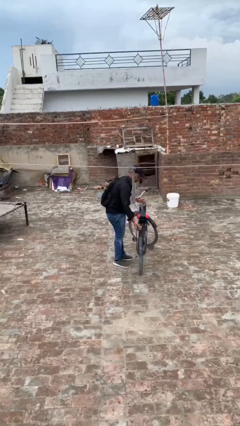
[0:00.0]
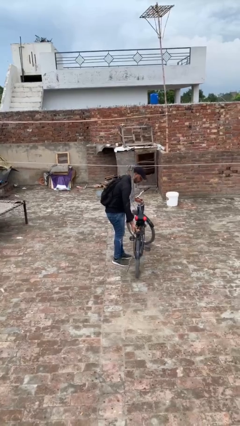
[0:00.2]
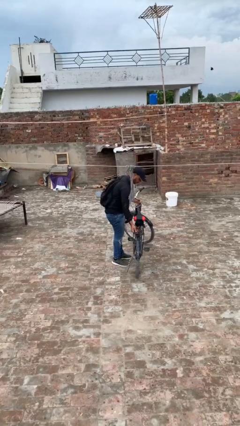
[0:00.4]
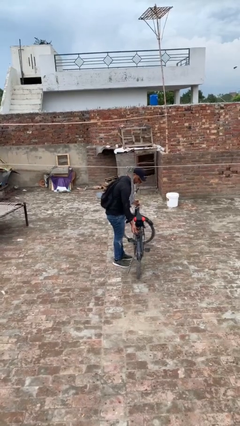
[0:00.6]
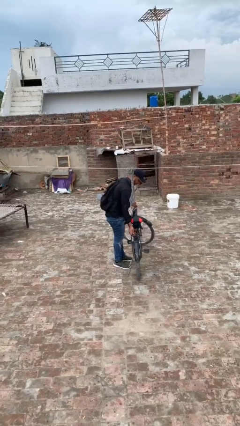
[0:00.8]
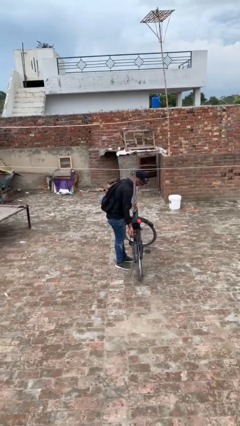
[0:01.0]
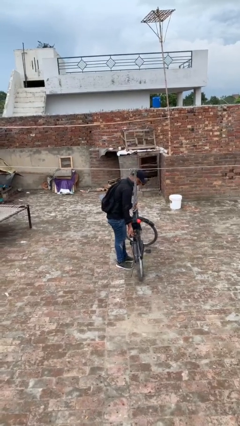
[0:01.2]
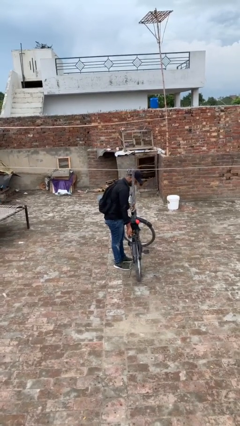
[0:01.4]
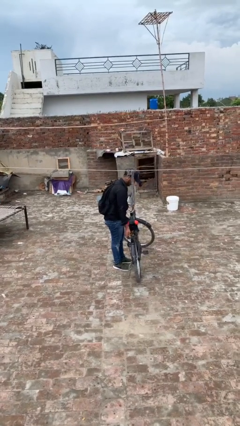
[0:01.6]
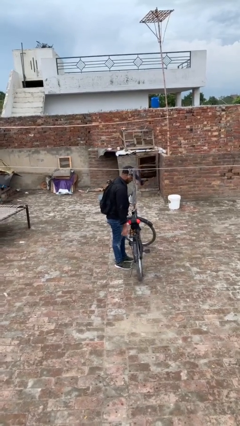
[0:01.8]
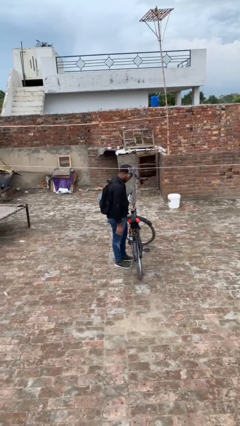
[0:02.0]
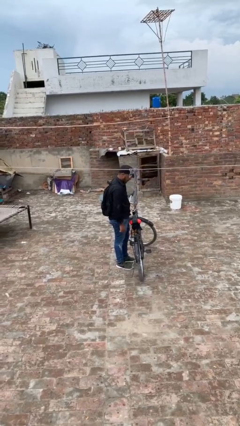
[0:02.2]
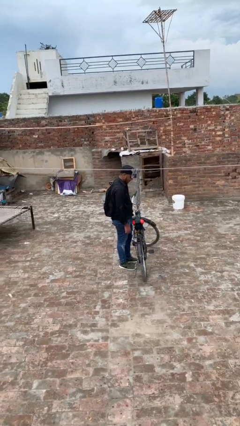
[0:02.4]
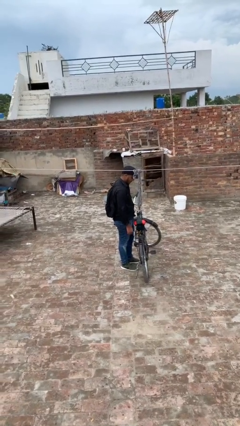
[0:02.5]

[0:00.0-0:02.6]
person puts down object on floor

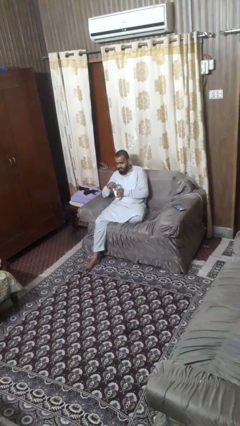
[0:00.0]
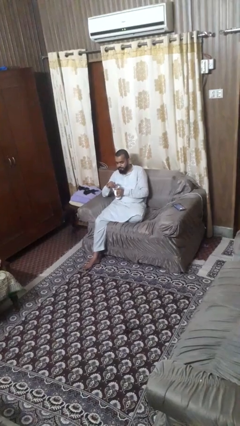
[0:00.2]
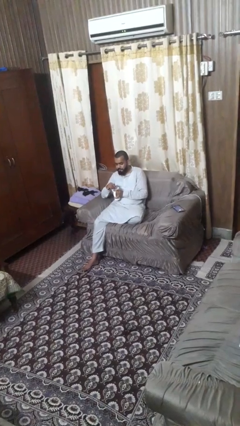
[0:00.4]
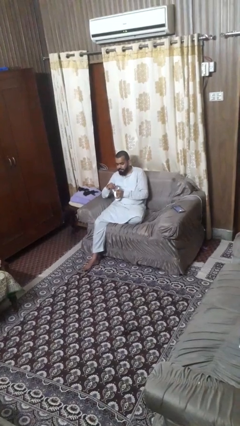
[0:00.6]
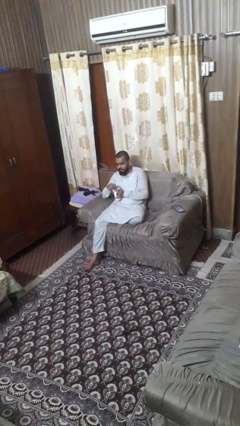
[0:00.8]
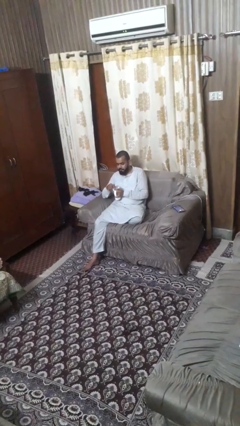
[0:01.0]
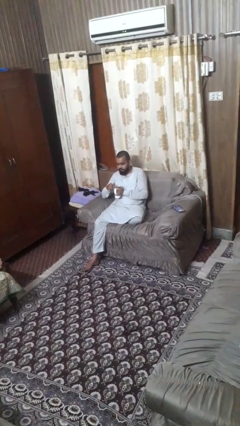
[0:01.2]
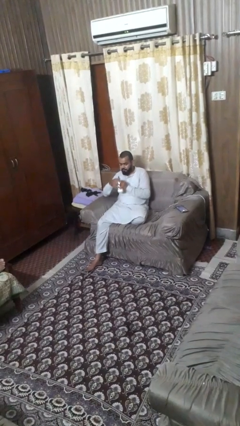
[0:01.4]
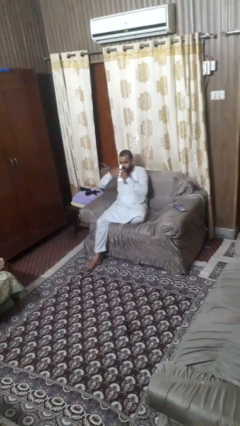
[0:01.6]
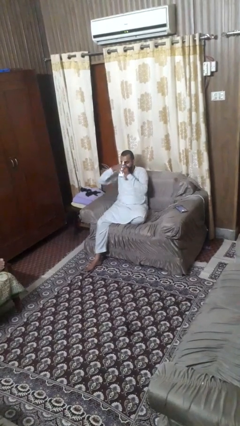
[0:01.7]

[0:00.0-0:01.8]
person stirs mug

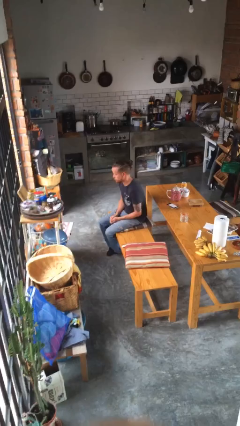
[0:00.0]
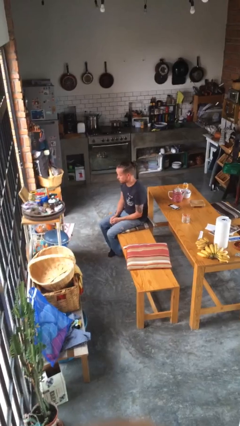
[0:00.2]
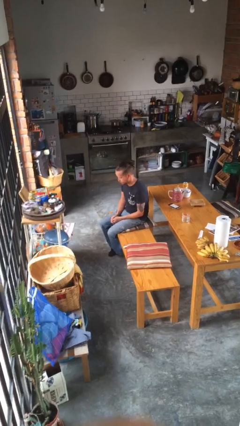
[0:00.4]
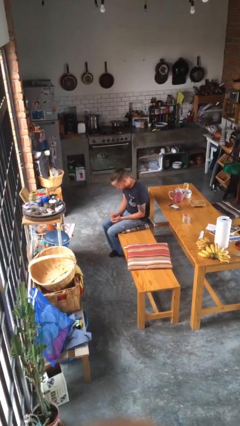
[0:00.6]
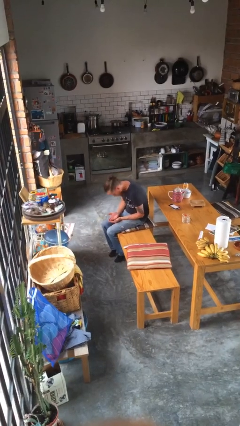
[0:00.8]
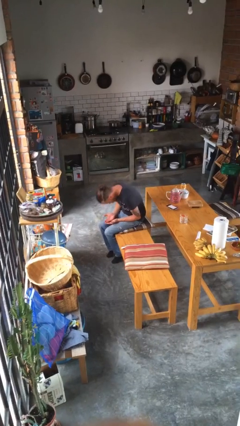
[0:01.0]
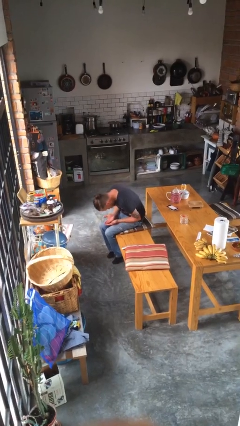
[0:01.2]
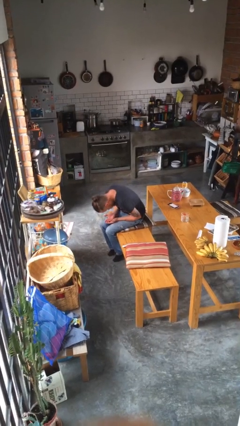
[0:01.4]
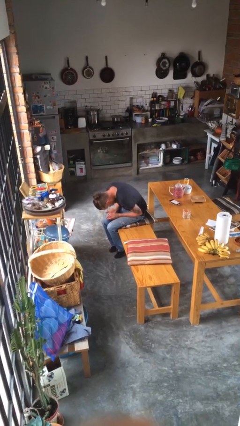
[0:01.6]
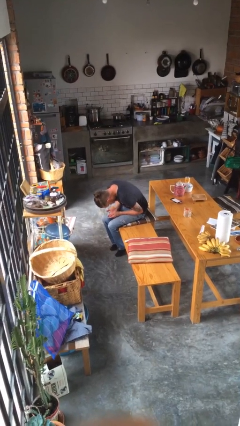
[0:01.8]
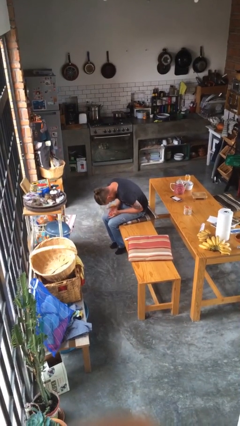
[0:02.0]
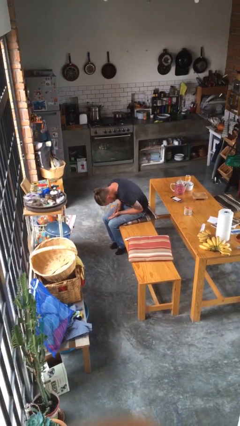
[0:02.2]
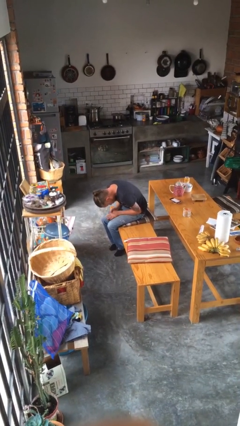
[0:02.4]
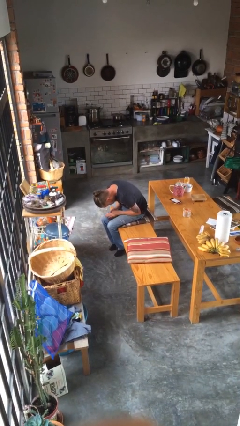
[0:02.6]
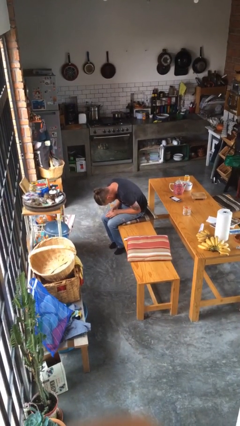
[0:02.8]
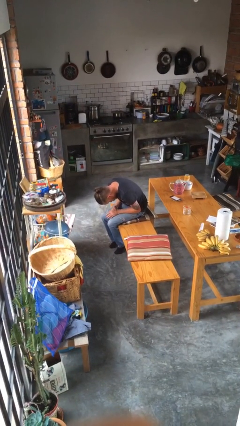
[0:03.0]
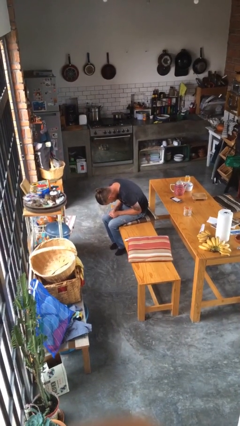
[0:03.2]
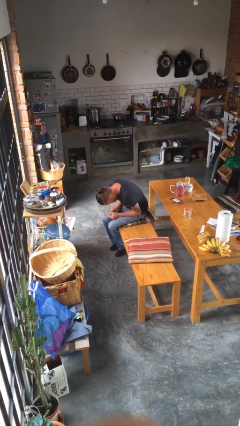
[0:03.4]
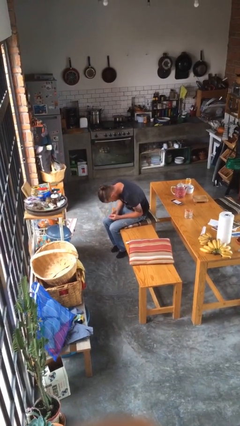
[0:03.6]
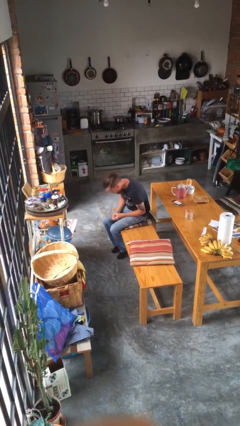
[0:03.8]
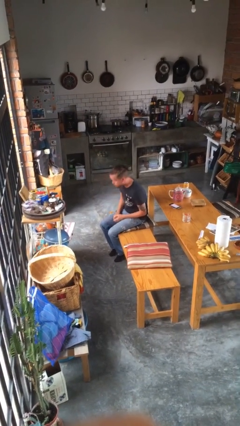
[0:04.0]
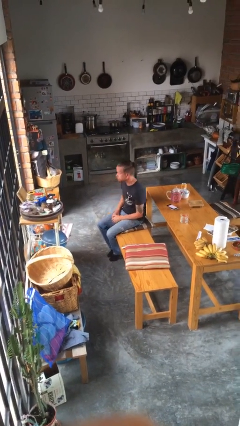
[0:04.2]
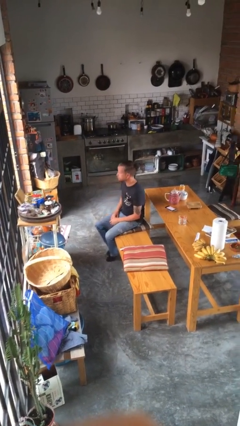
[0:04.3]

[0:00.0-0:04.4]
person looks at hands in lap

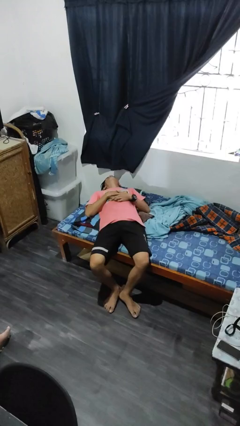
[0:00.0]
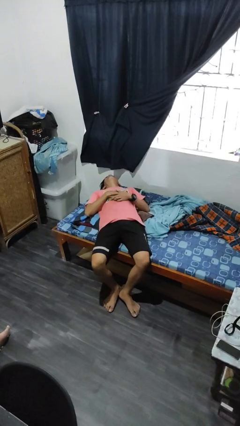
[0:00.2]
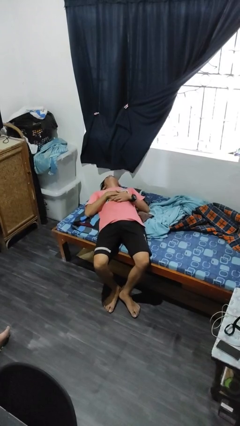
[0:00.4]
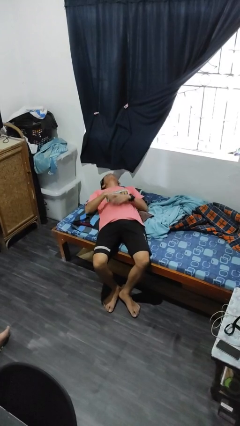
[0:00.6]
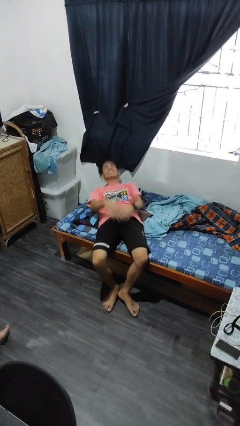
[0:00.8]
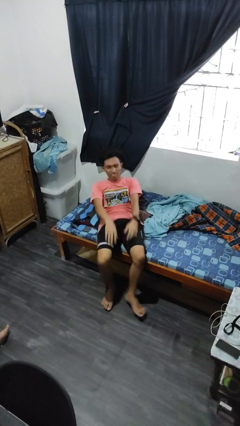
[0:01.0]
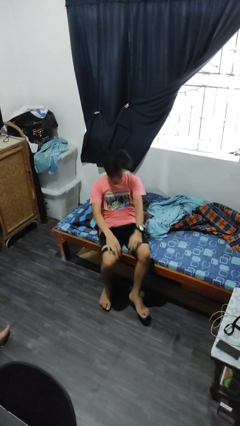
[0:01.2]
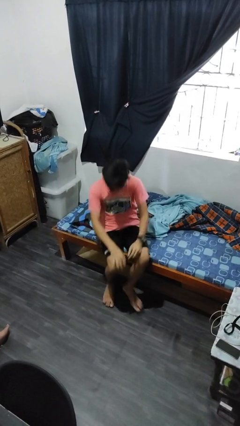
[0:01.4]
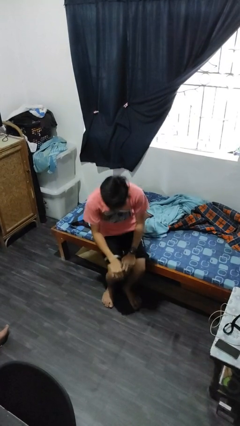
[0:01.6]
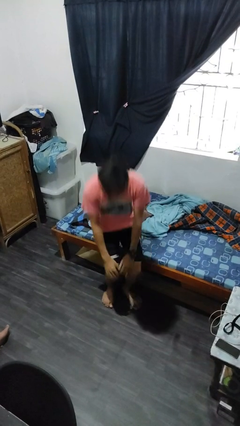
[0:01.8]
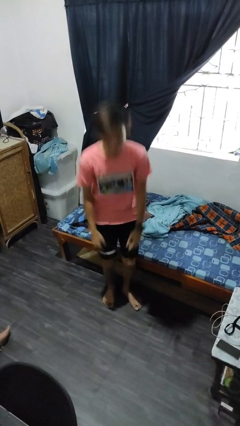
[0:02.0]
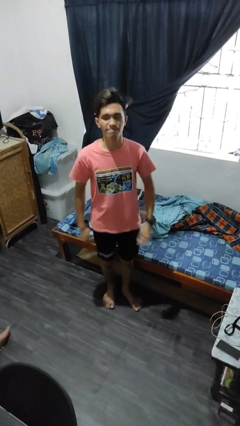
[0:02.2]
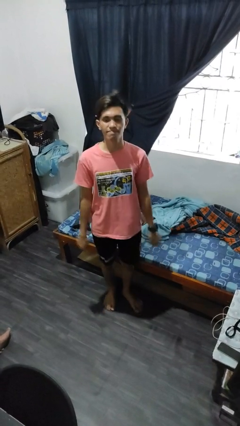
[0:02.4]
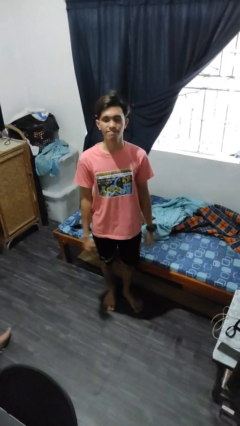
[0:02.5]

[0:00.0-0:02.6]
person stands up

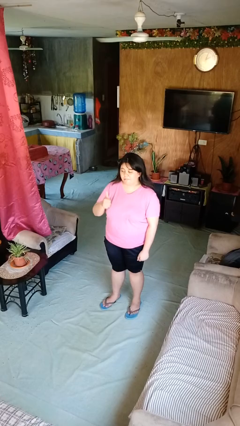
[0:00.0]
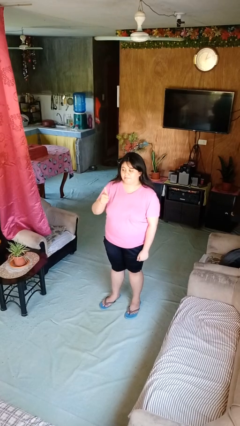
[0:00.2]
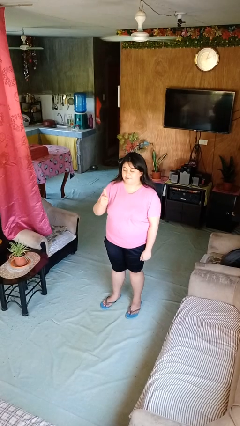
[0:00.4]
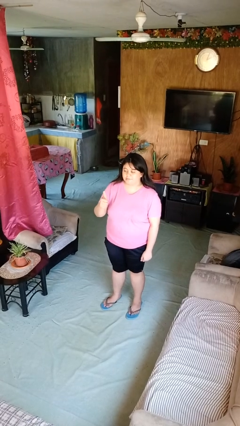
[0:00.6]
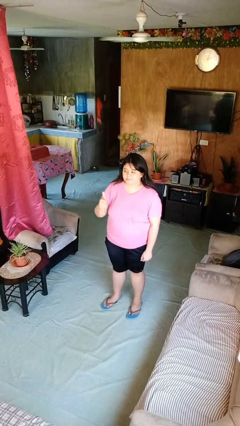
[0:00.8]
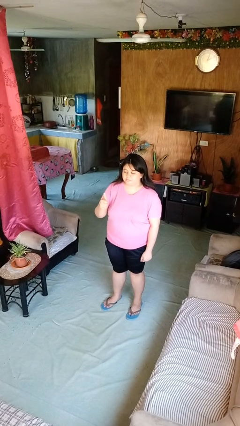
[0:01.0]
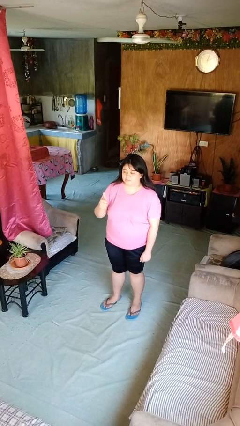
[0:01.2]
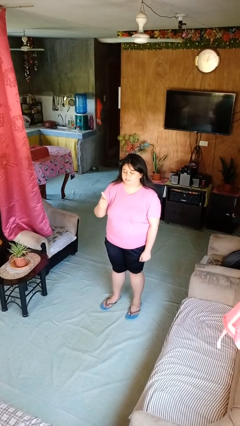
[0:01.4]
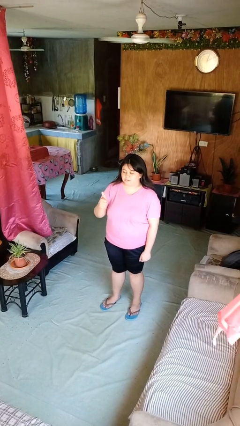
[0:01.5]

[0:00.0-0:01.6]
person gestures thumbs up

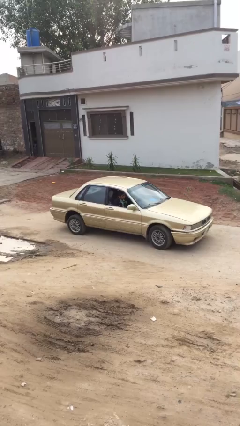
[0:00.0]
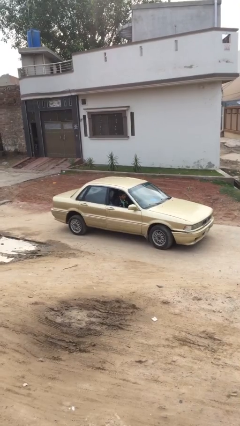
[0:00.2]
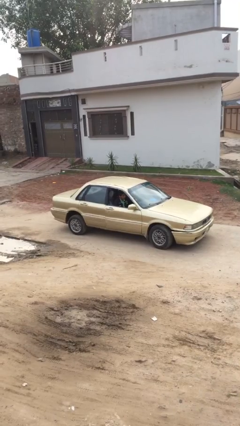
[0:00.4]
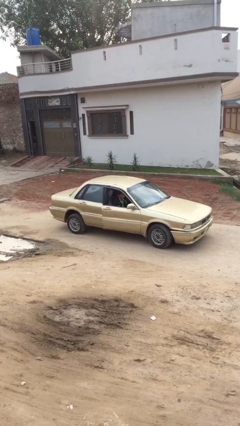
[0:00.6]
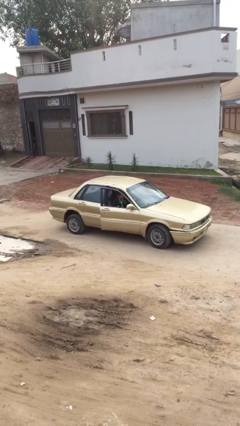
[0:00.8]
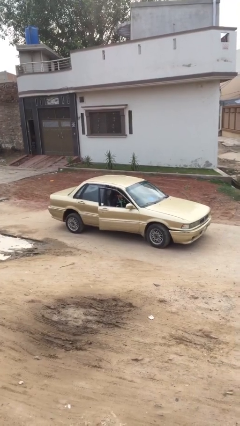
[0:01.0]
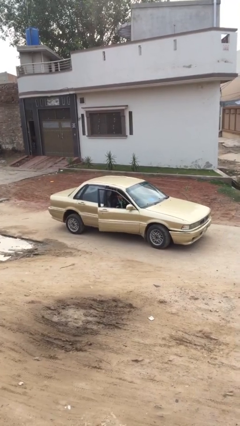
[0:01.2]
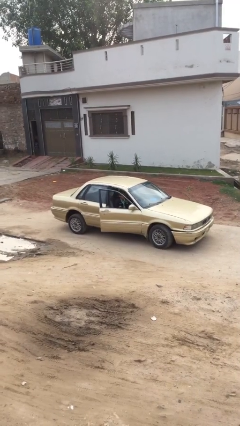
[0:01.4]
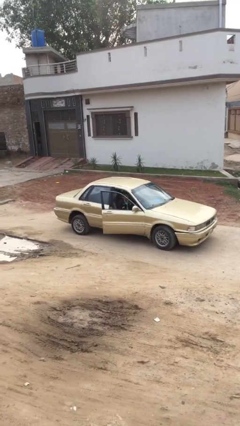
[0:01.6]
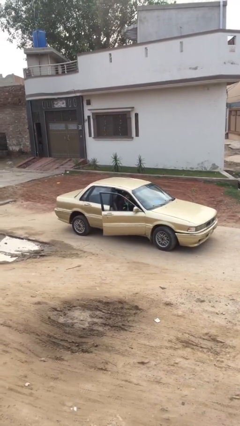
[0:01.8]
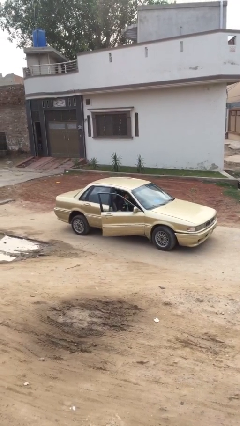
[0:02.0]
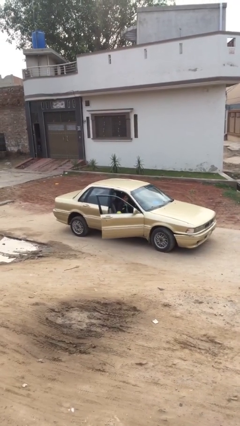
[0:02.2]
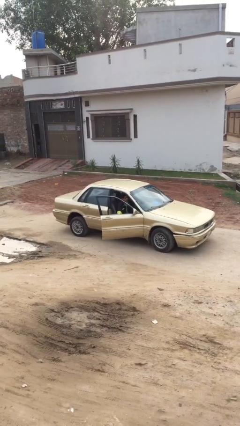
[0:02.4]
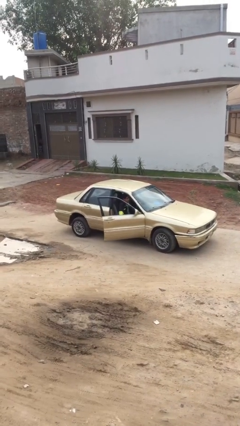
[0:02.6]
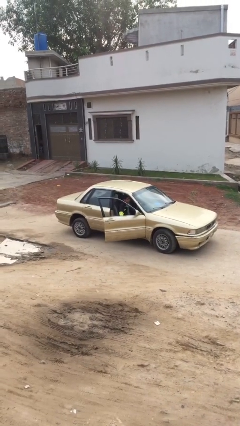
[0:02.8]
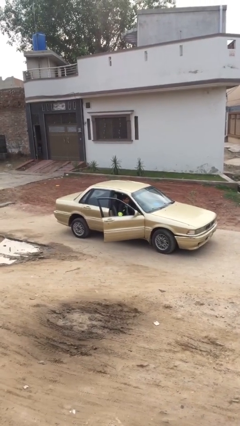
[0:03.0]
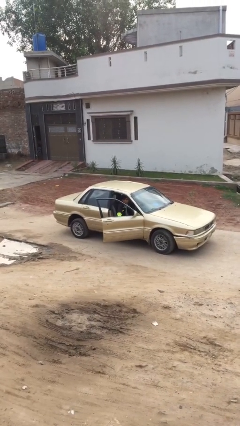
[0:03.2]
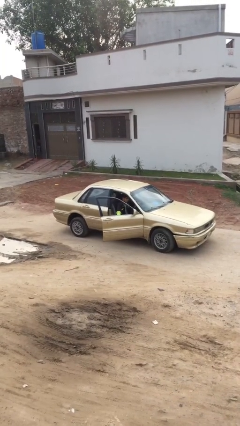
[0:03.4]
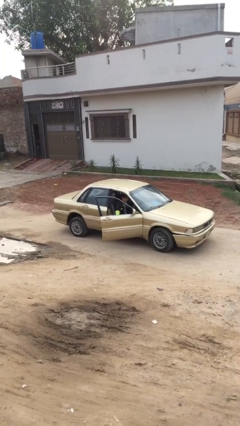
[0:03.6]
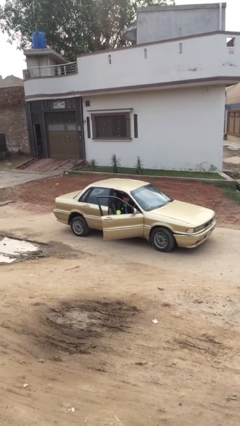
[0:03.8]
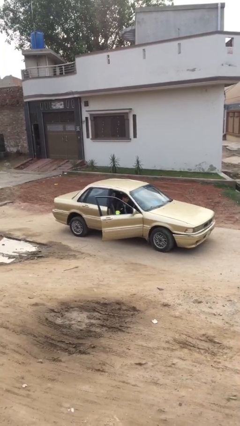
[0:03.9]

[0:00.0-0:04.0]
person opens car door

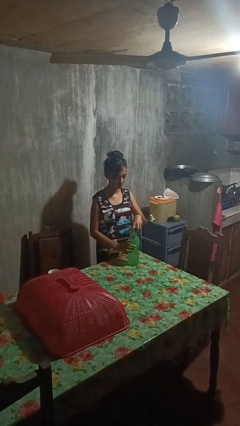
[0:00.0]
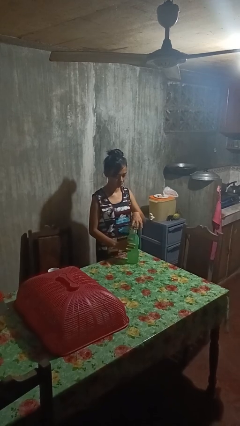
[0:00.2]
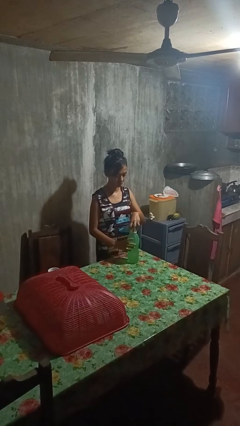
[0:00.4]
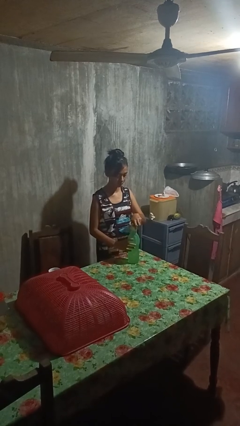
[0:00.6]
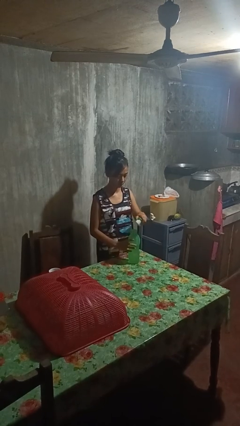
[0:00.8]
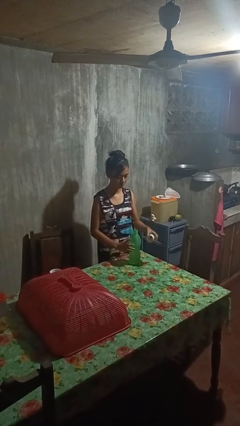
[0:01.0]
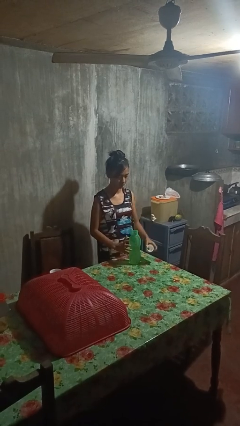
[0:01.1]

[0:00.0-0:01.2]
person unscrews lid from bottle
